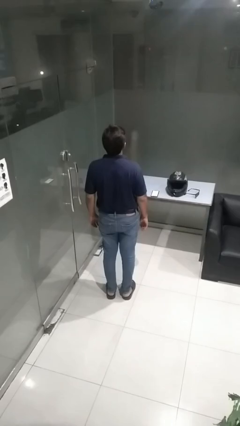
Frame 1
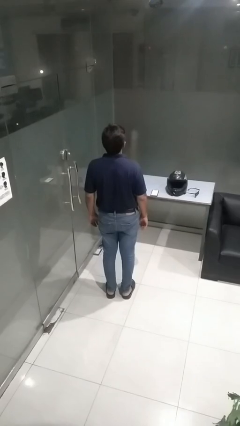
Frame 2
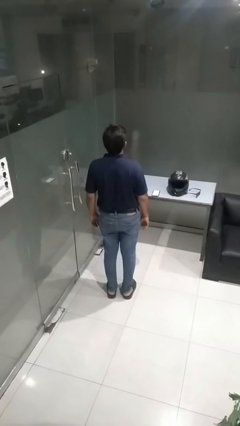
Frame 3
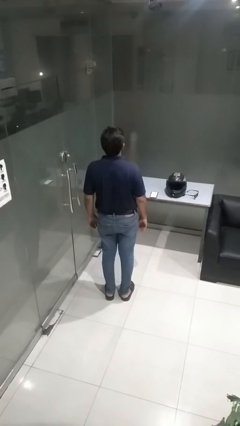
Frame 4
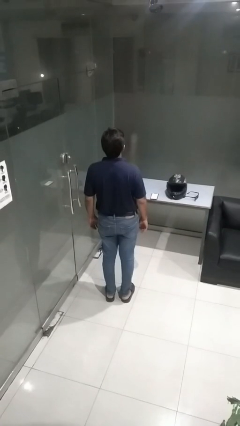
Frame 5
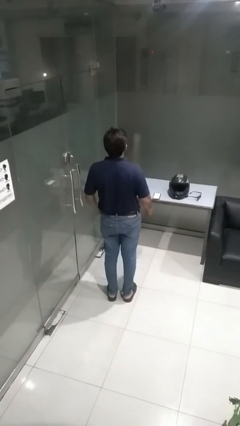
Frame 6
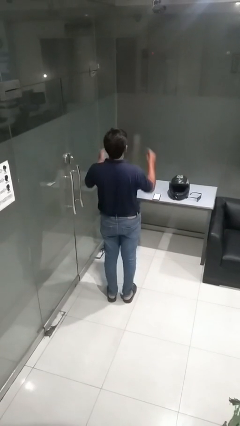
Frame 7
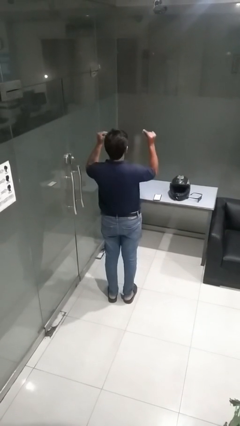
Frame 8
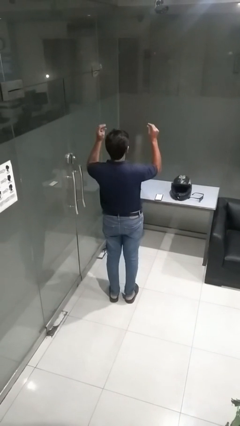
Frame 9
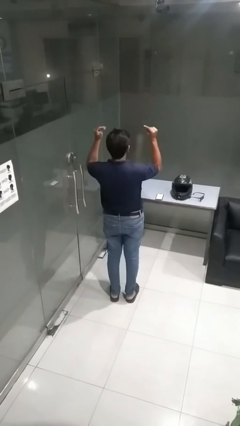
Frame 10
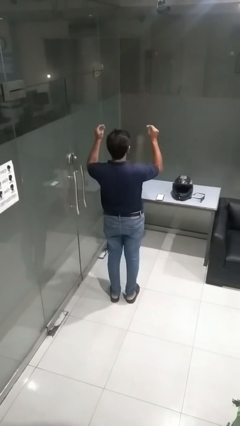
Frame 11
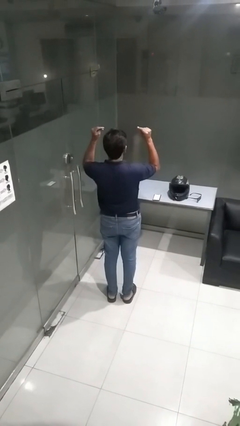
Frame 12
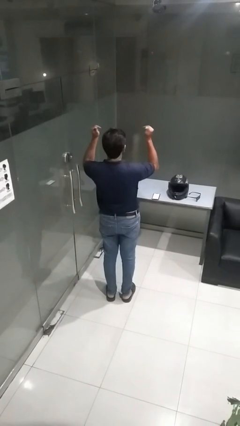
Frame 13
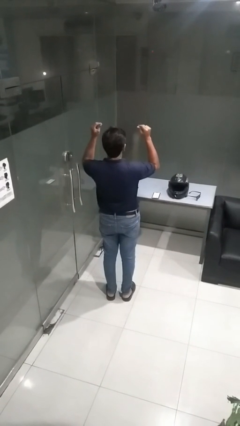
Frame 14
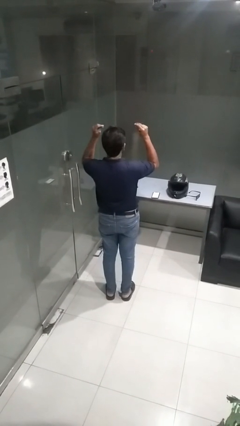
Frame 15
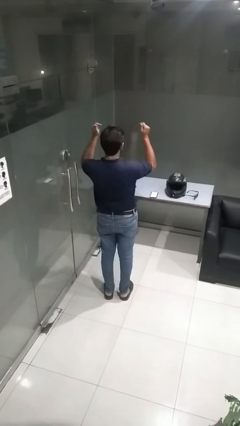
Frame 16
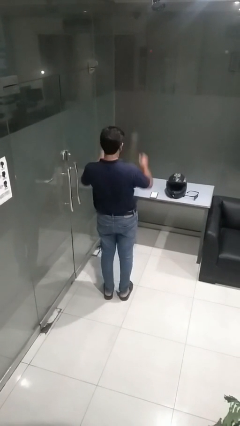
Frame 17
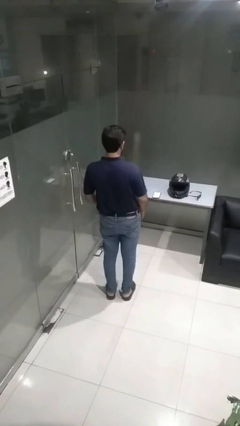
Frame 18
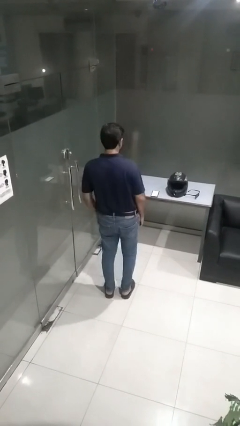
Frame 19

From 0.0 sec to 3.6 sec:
person snaps fingers

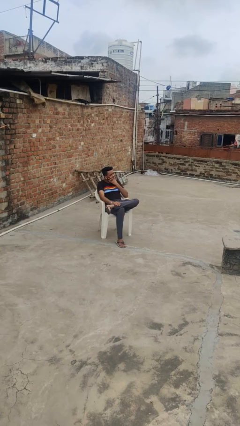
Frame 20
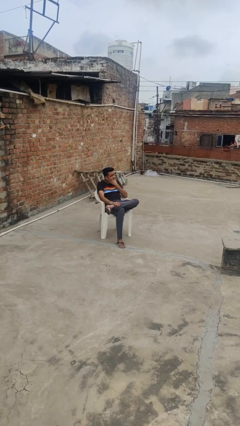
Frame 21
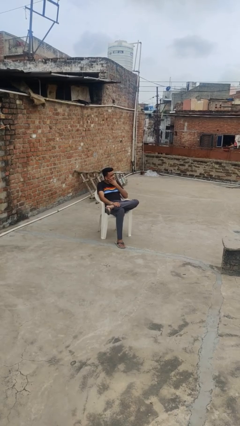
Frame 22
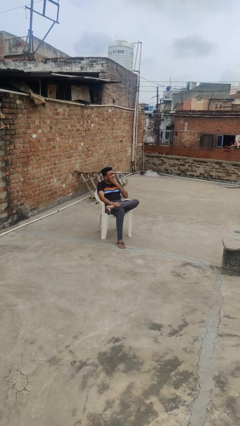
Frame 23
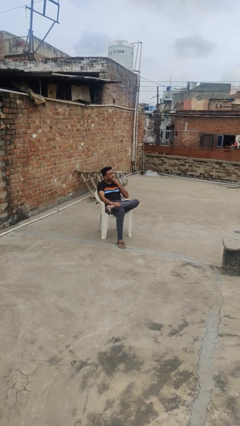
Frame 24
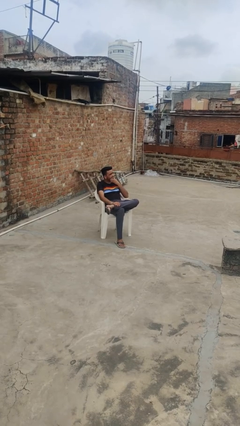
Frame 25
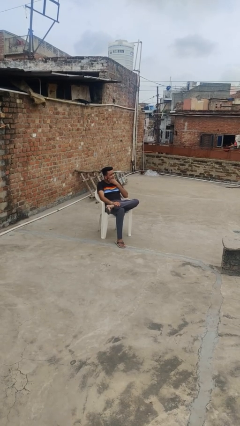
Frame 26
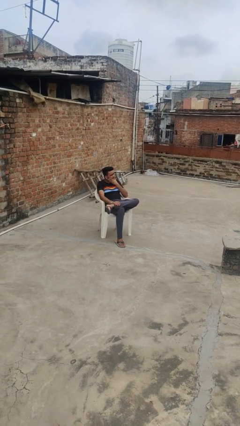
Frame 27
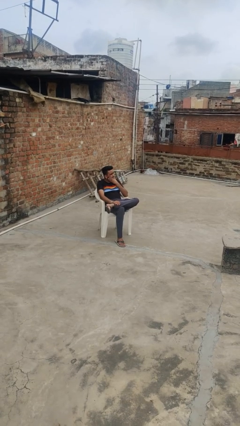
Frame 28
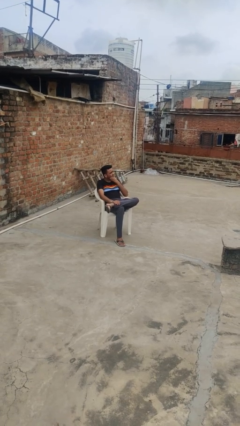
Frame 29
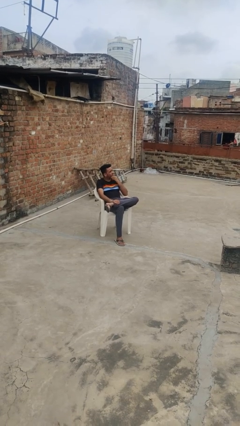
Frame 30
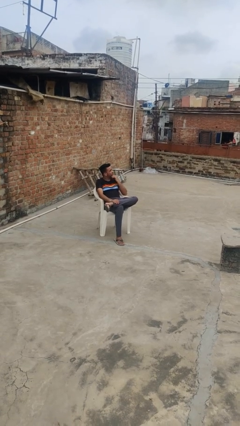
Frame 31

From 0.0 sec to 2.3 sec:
person strokes chin

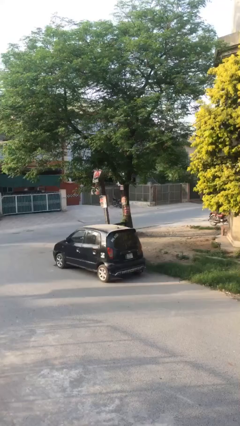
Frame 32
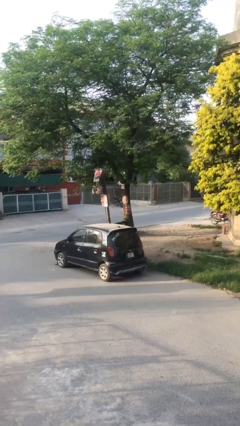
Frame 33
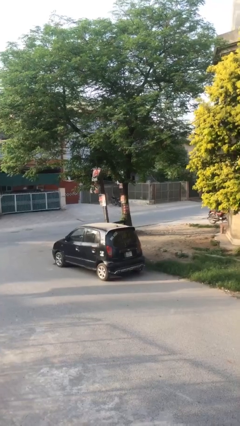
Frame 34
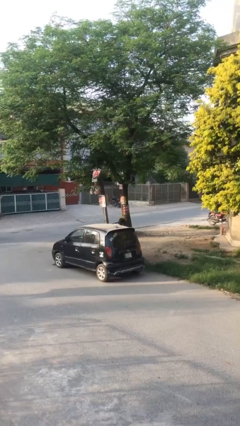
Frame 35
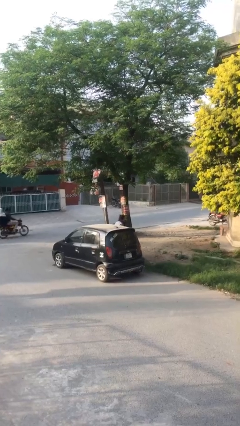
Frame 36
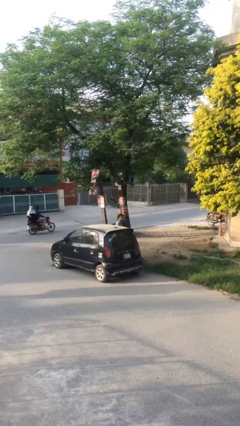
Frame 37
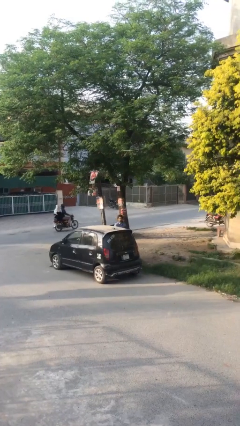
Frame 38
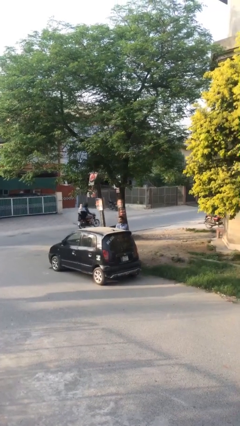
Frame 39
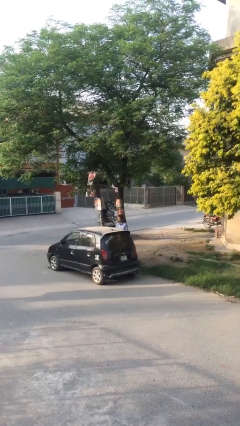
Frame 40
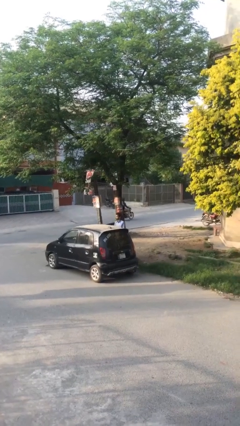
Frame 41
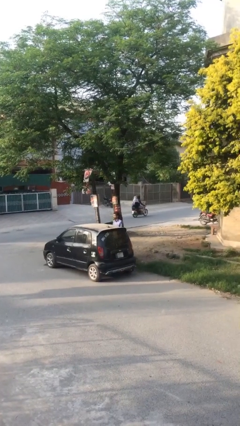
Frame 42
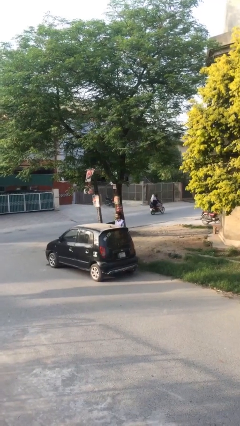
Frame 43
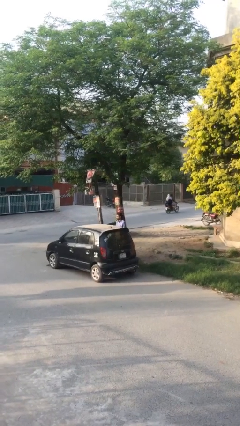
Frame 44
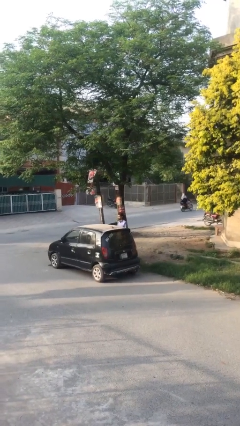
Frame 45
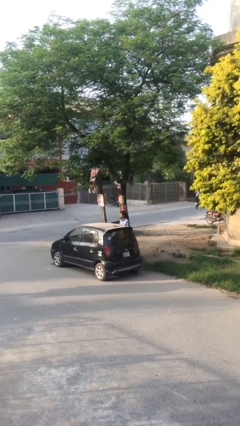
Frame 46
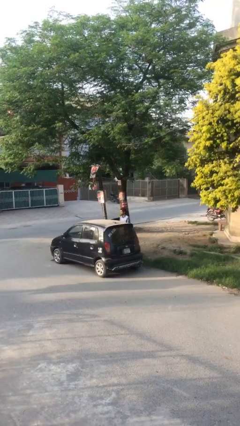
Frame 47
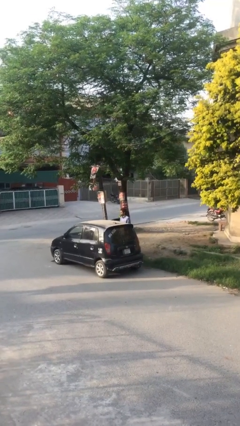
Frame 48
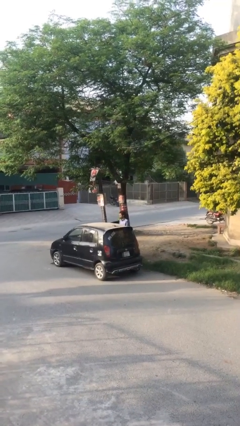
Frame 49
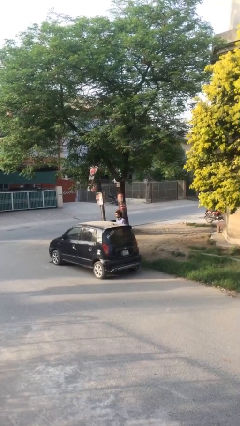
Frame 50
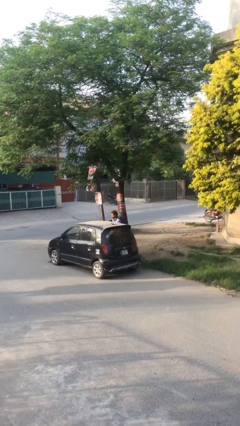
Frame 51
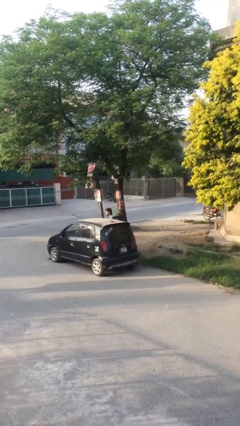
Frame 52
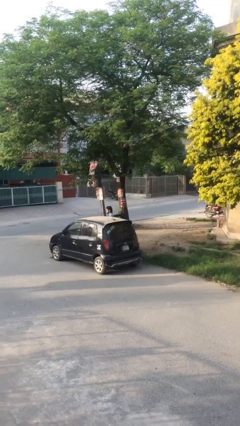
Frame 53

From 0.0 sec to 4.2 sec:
person exits car

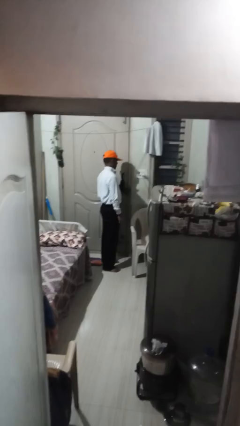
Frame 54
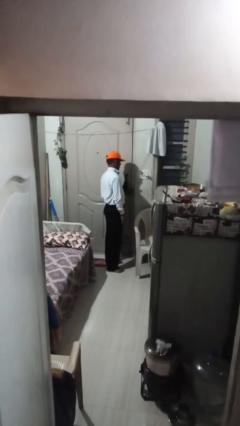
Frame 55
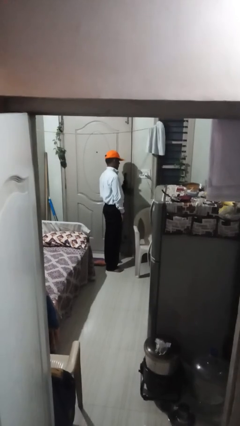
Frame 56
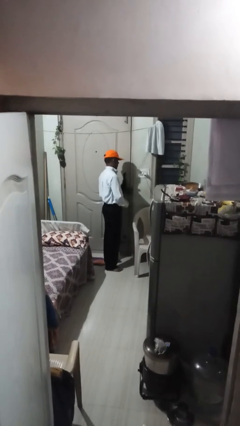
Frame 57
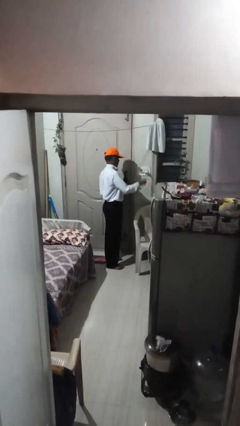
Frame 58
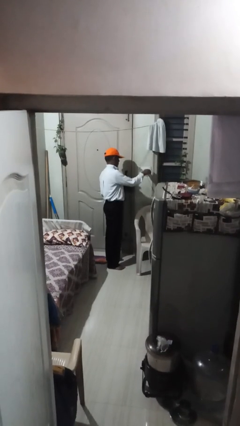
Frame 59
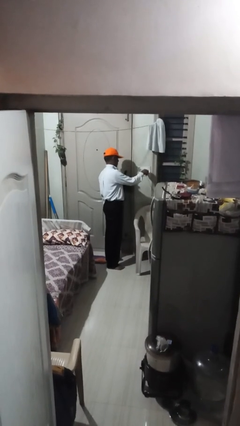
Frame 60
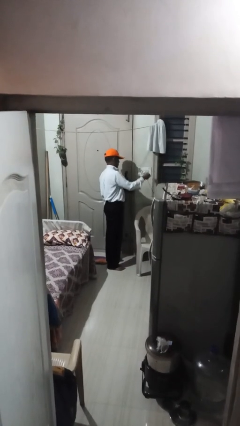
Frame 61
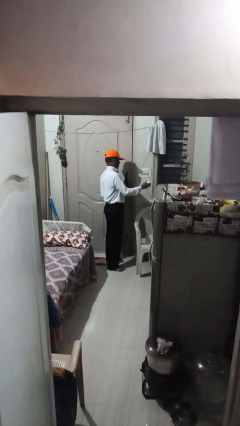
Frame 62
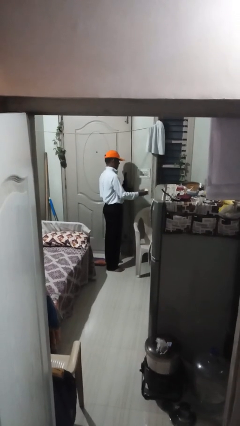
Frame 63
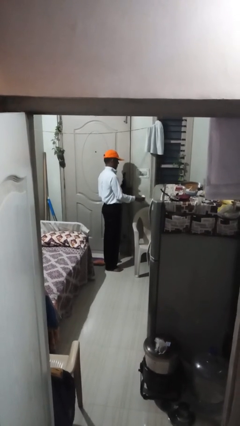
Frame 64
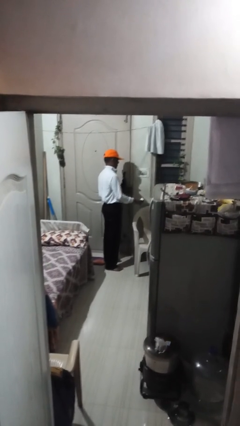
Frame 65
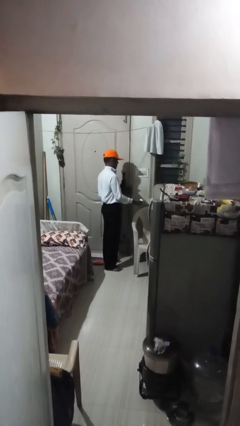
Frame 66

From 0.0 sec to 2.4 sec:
person unplugs from electrical socket

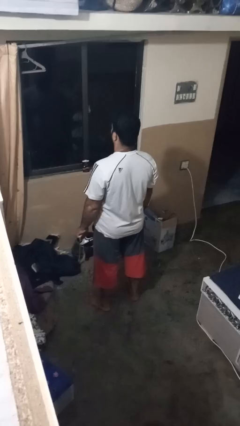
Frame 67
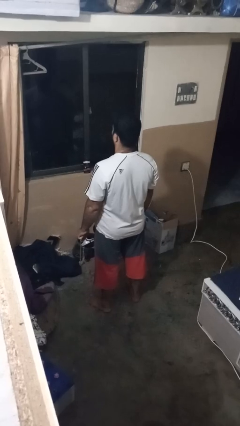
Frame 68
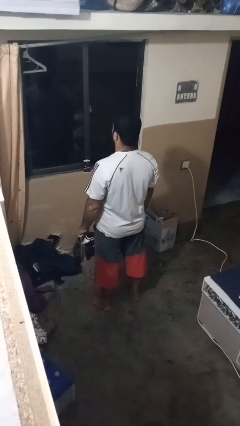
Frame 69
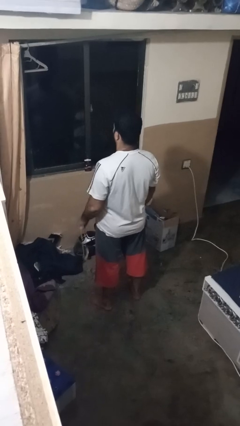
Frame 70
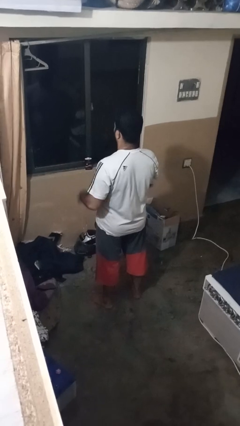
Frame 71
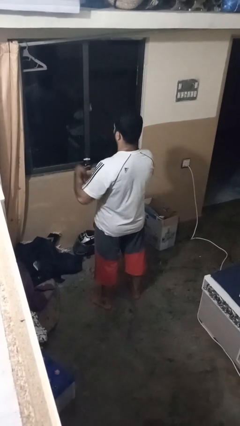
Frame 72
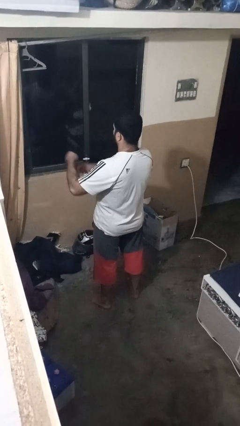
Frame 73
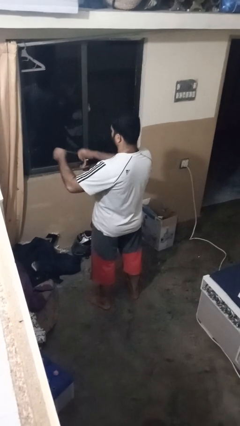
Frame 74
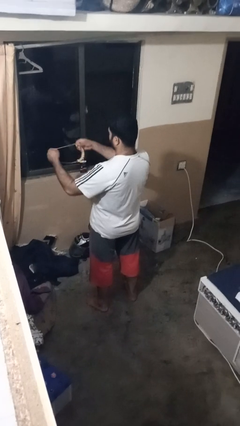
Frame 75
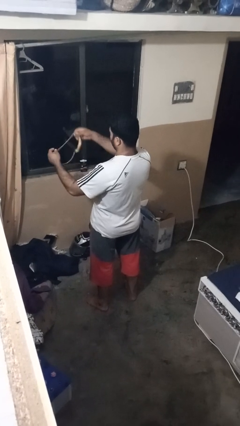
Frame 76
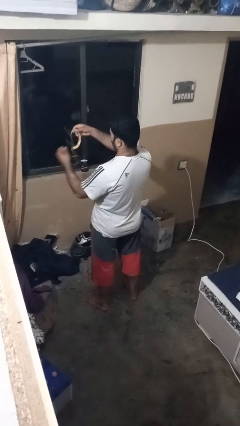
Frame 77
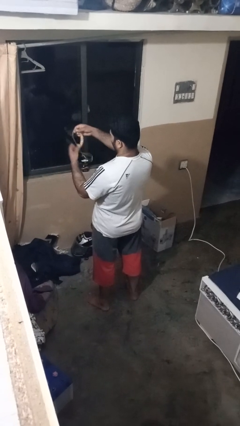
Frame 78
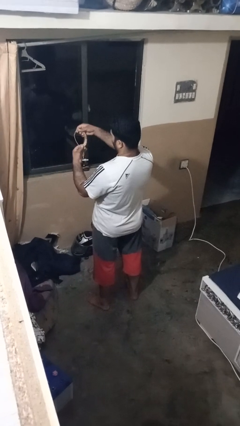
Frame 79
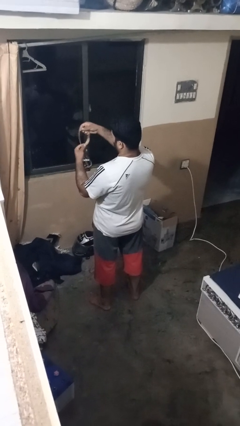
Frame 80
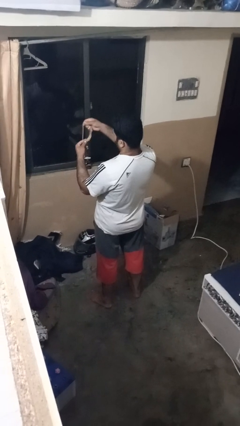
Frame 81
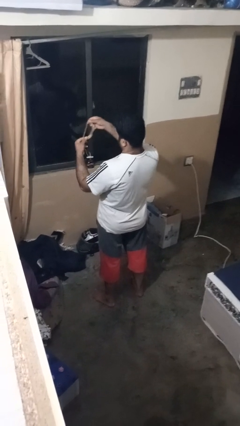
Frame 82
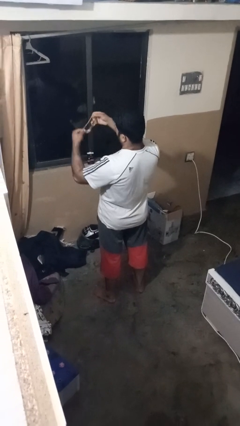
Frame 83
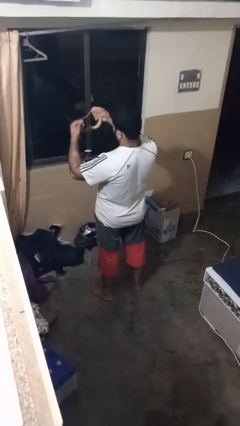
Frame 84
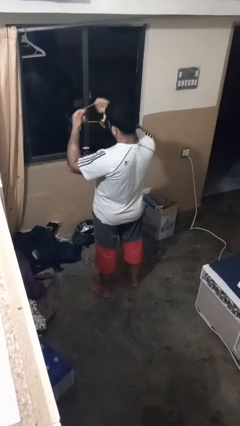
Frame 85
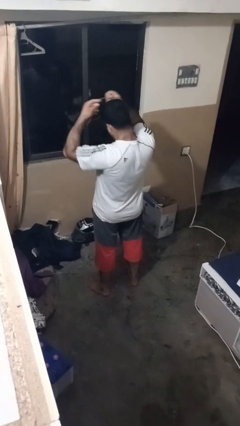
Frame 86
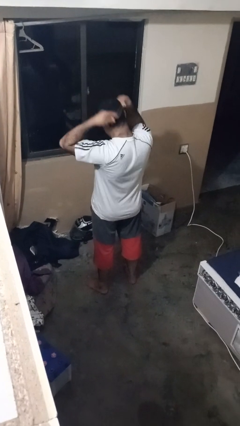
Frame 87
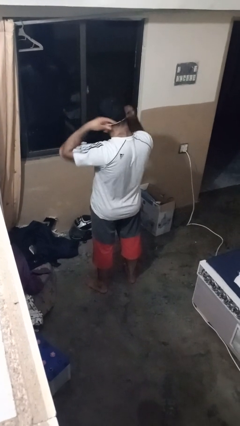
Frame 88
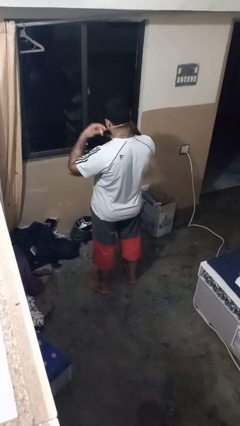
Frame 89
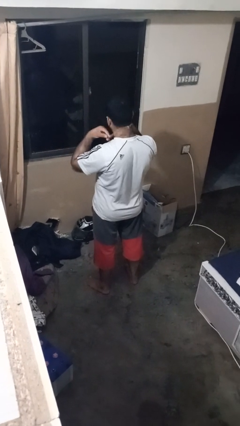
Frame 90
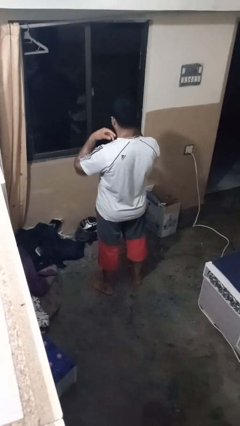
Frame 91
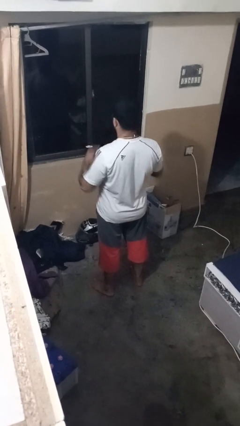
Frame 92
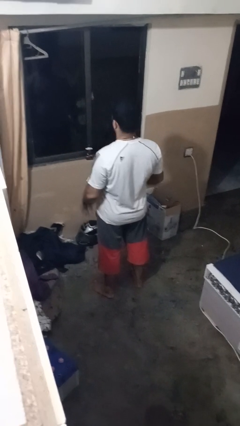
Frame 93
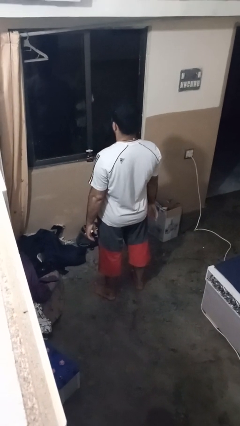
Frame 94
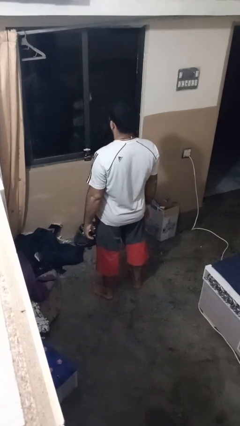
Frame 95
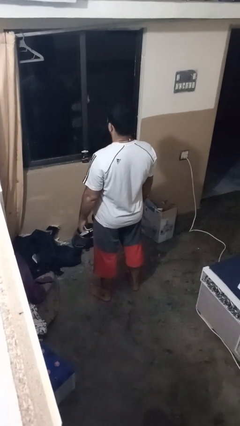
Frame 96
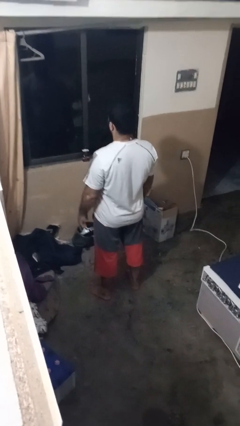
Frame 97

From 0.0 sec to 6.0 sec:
person puts on necklace
